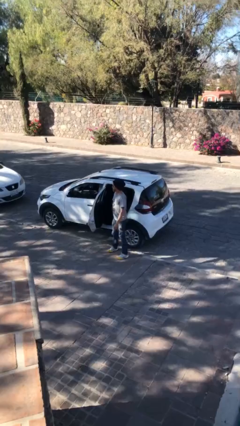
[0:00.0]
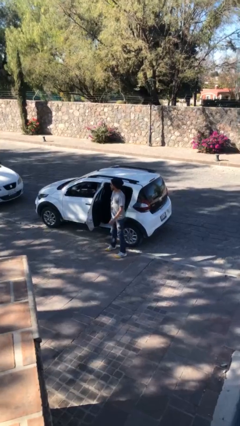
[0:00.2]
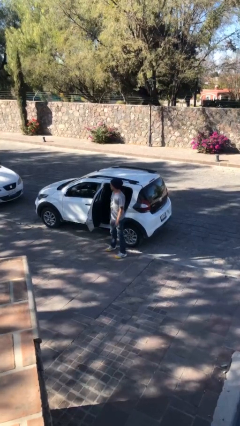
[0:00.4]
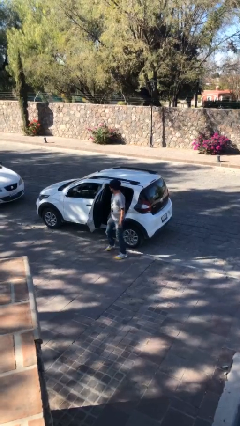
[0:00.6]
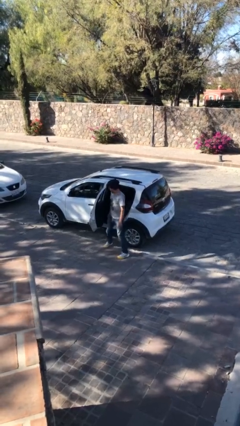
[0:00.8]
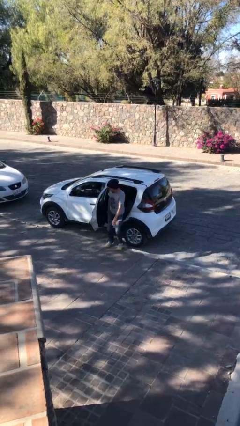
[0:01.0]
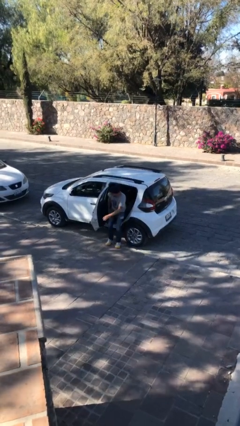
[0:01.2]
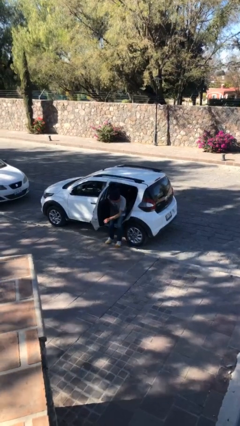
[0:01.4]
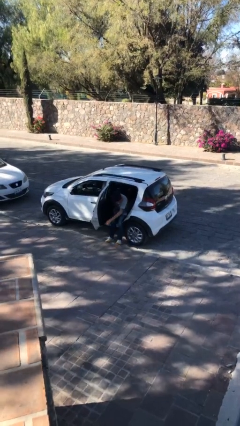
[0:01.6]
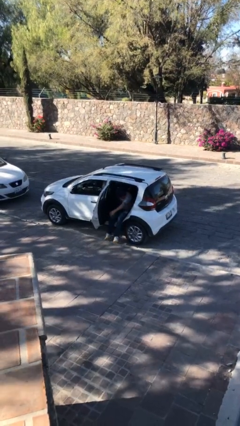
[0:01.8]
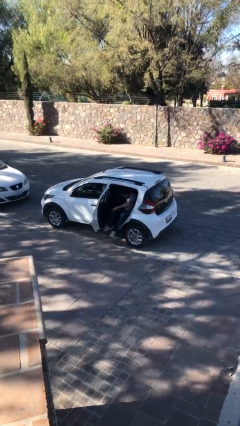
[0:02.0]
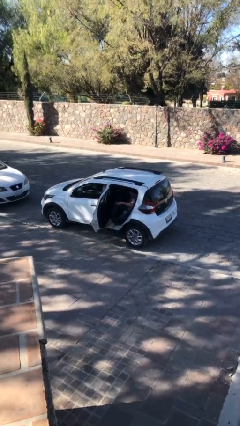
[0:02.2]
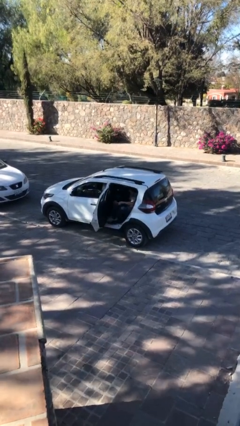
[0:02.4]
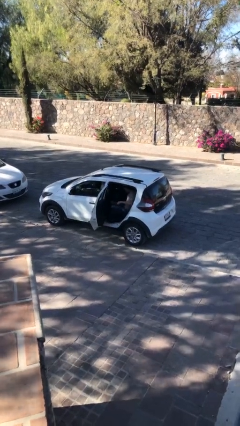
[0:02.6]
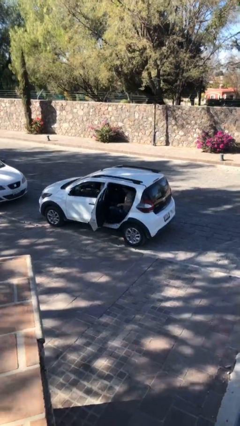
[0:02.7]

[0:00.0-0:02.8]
person enters car

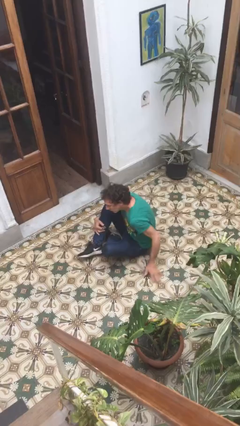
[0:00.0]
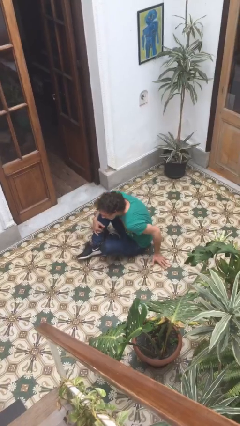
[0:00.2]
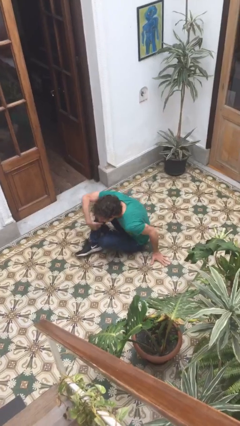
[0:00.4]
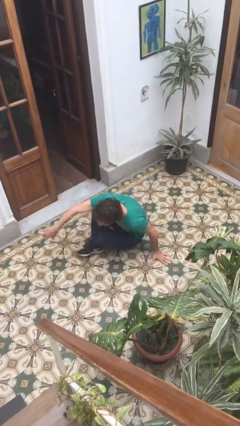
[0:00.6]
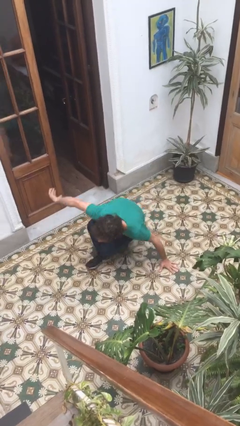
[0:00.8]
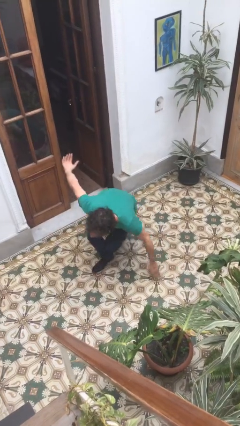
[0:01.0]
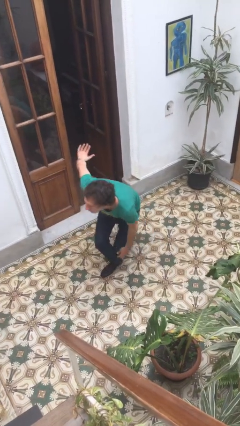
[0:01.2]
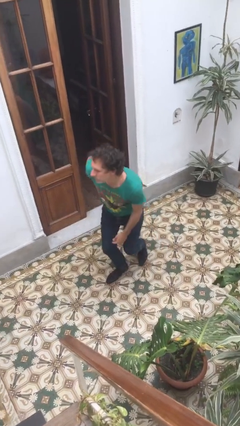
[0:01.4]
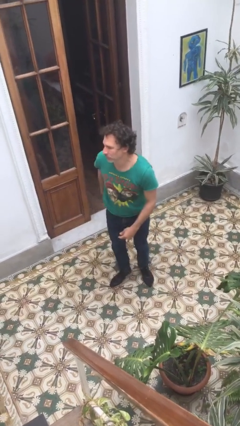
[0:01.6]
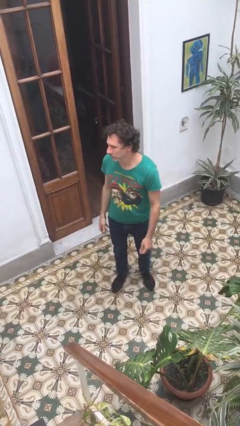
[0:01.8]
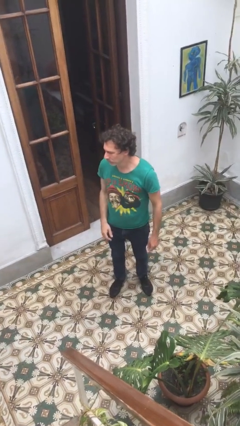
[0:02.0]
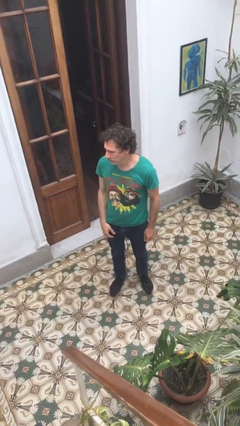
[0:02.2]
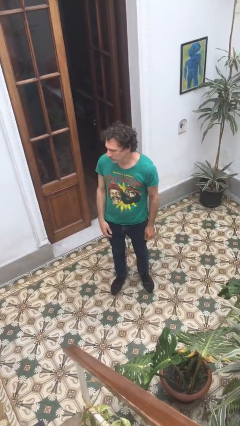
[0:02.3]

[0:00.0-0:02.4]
person stands up

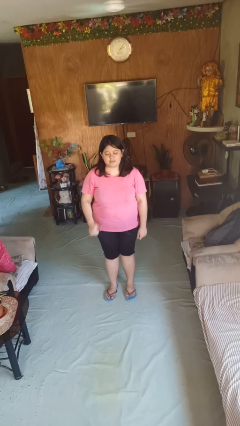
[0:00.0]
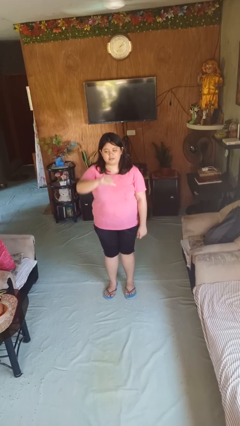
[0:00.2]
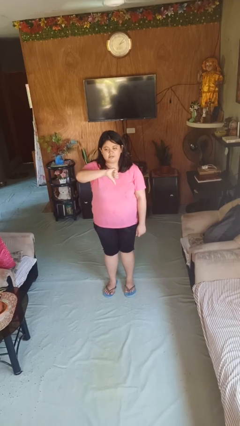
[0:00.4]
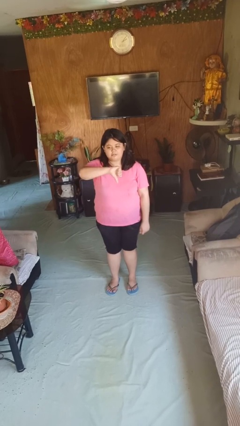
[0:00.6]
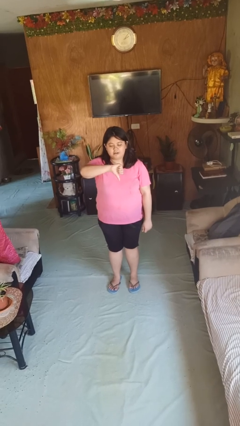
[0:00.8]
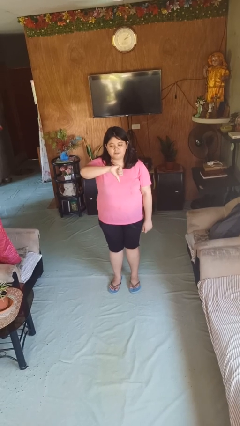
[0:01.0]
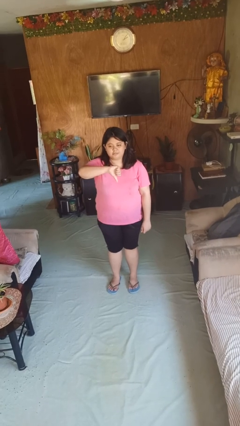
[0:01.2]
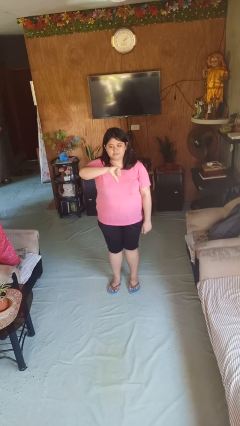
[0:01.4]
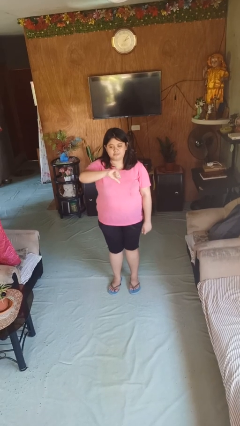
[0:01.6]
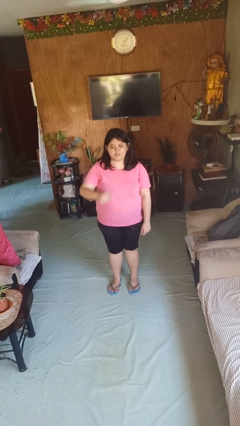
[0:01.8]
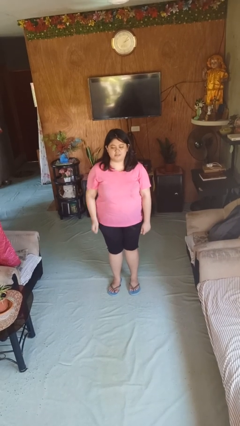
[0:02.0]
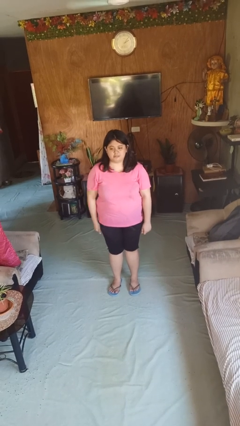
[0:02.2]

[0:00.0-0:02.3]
person gestures thumbs down

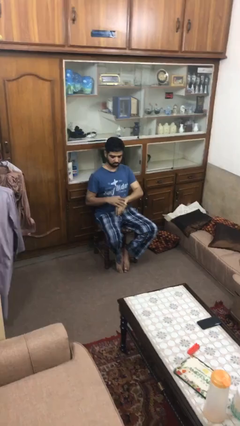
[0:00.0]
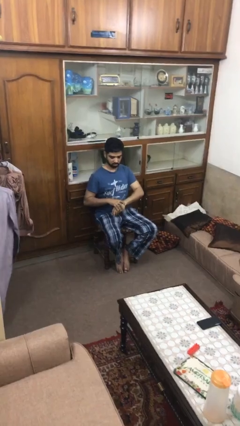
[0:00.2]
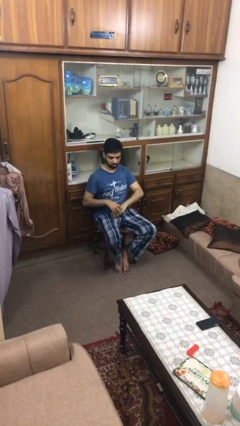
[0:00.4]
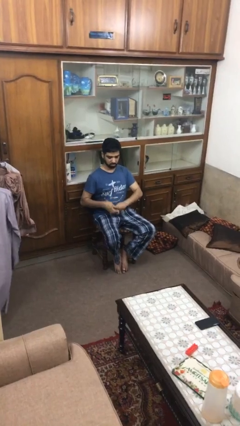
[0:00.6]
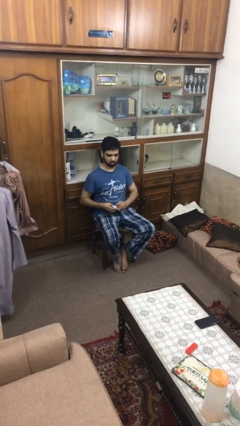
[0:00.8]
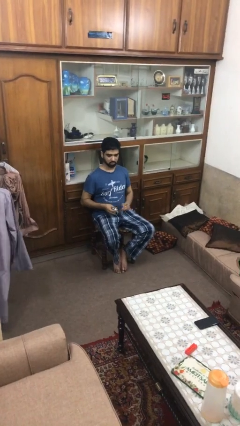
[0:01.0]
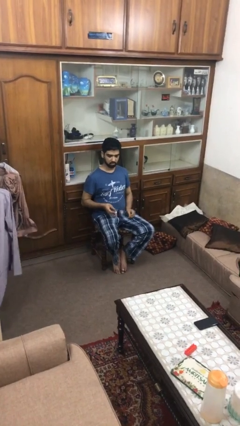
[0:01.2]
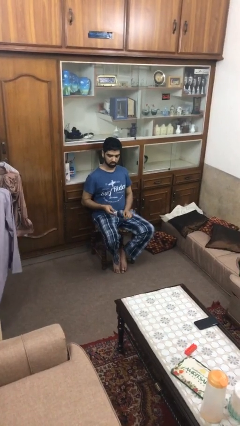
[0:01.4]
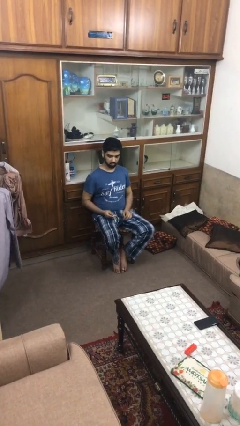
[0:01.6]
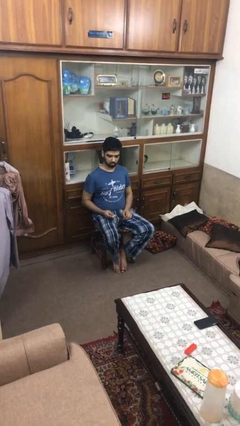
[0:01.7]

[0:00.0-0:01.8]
person takes off wristwatch

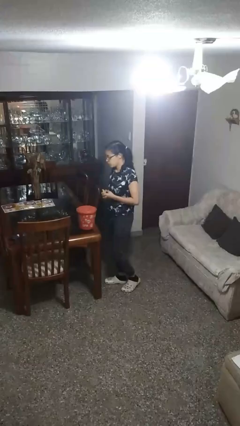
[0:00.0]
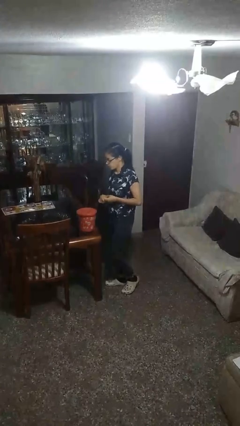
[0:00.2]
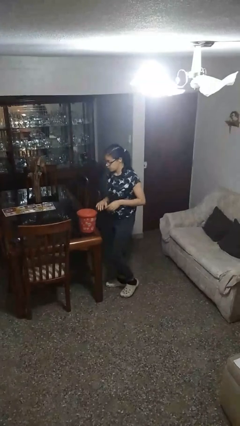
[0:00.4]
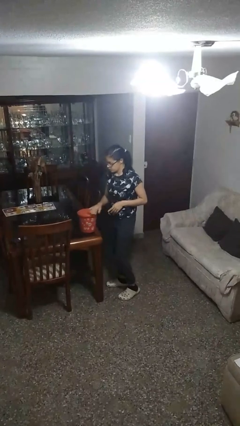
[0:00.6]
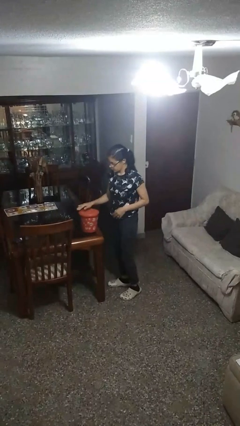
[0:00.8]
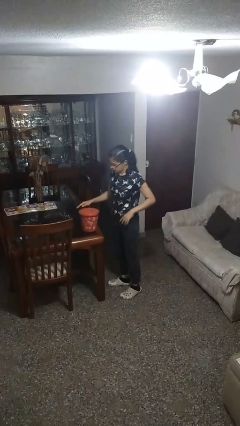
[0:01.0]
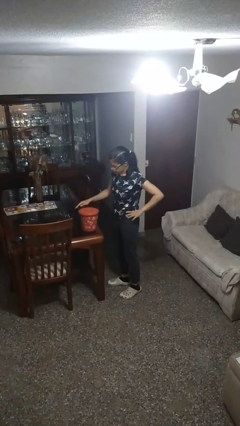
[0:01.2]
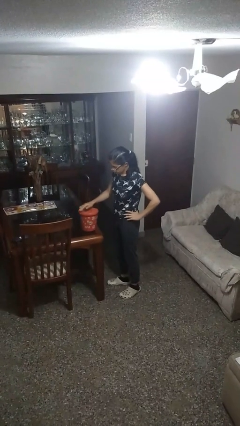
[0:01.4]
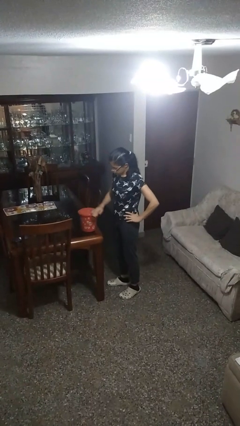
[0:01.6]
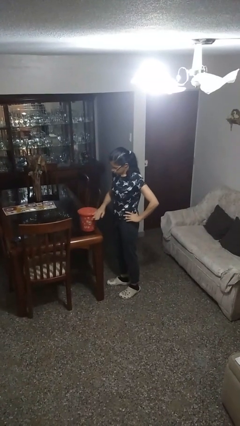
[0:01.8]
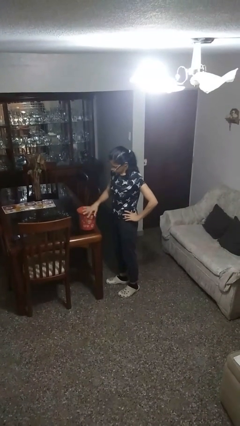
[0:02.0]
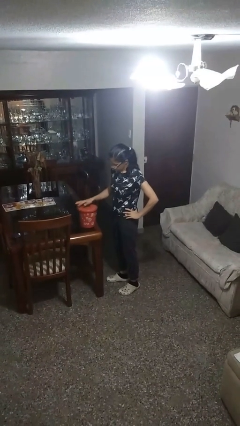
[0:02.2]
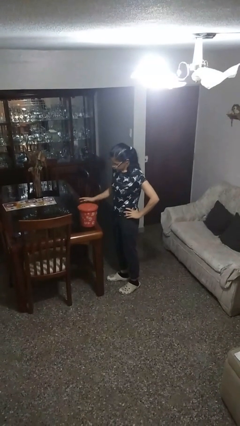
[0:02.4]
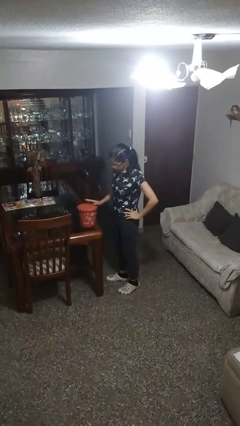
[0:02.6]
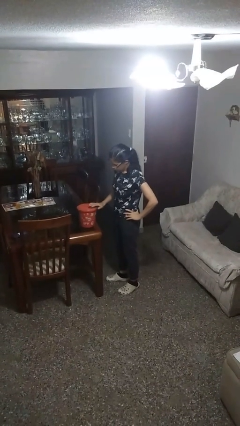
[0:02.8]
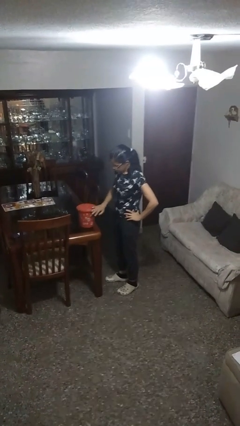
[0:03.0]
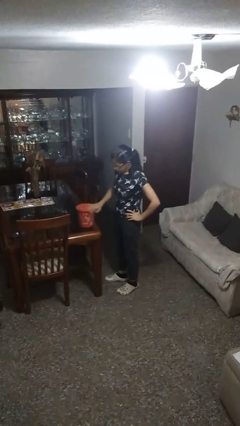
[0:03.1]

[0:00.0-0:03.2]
person waves hand over object

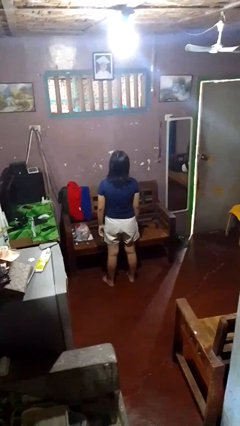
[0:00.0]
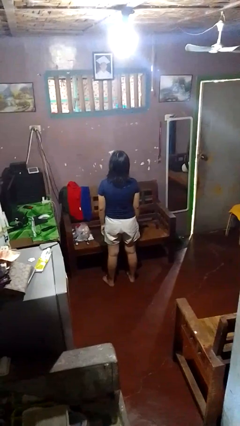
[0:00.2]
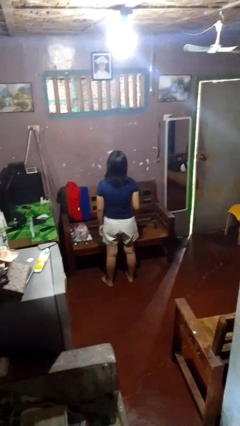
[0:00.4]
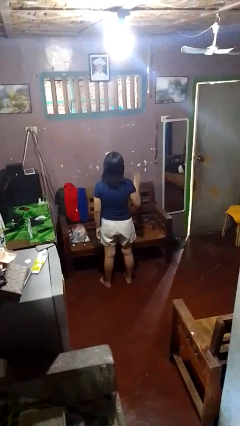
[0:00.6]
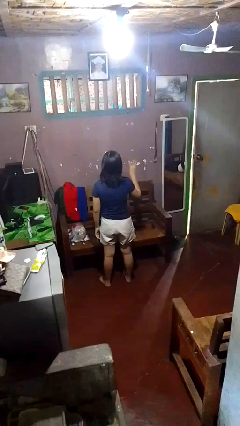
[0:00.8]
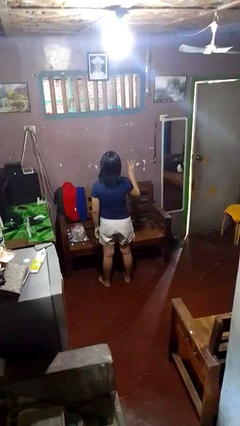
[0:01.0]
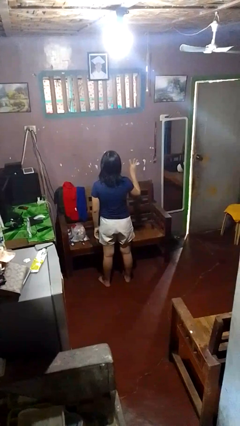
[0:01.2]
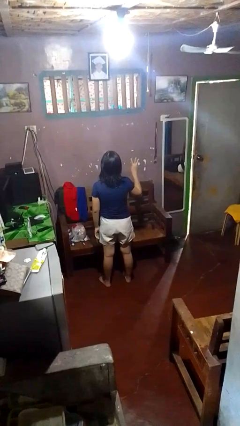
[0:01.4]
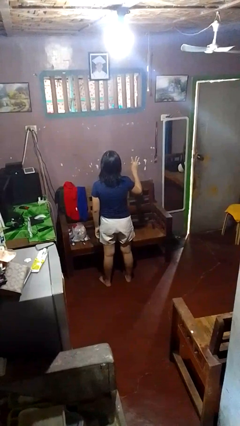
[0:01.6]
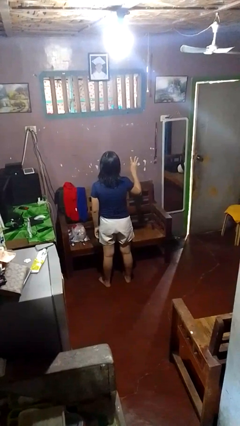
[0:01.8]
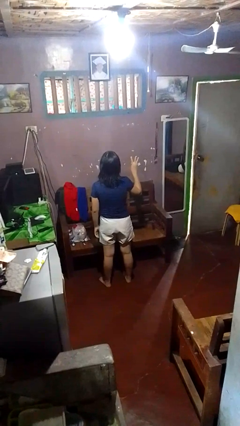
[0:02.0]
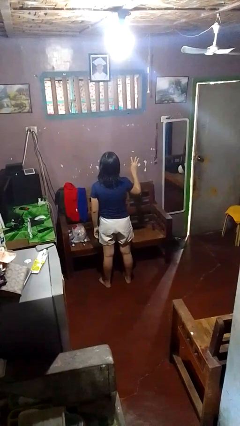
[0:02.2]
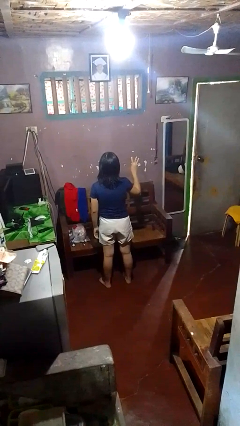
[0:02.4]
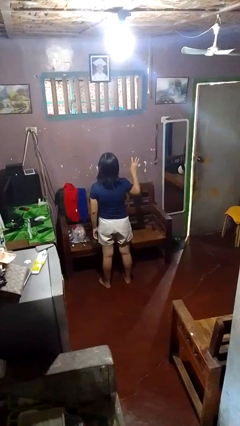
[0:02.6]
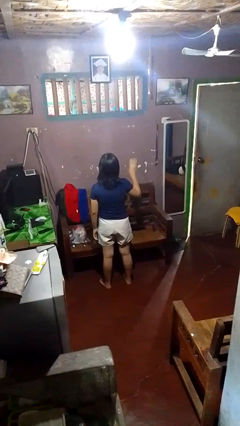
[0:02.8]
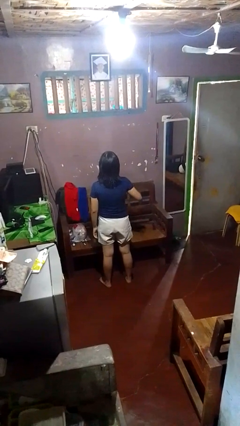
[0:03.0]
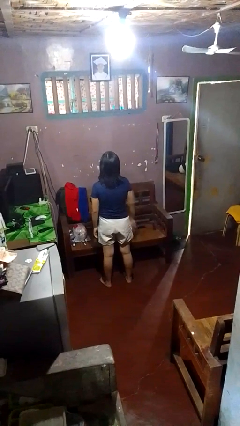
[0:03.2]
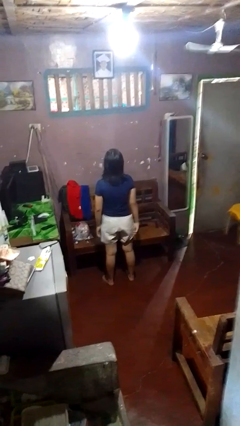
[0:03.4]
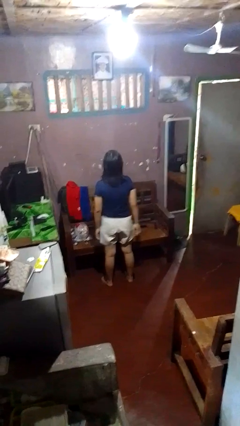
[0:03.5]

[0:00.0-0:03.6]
person gestures number three

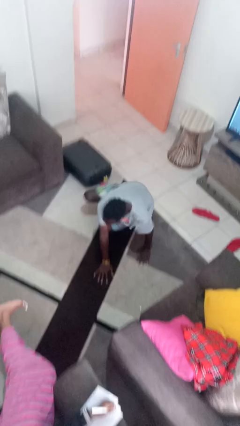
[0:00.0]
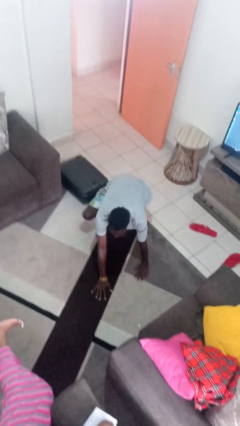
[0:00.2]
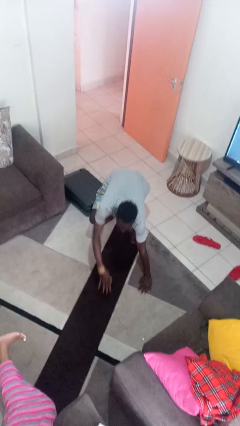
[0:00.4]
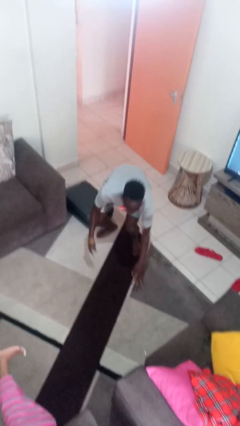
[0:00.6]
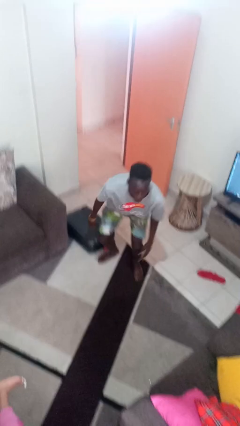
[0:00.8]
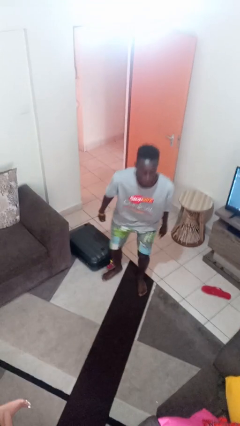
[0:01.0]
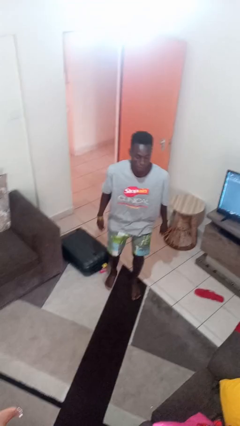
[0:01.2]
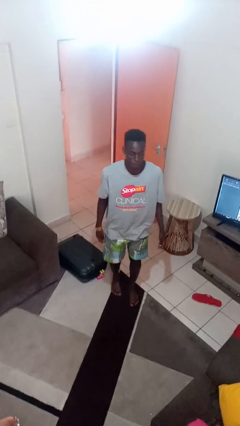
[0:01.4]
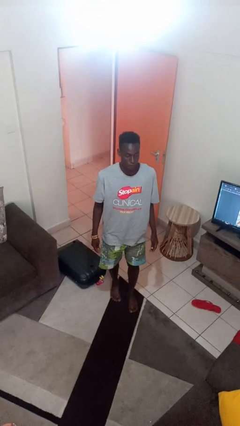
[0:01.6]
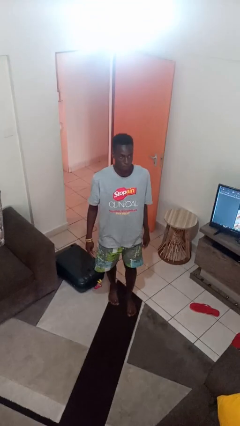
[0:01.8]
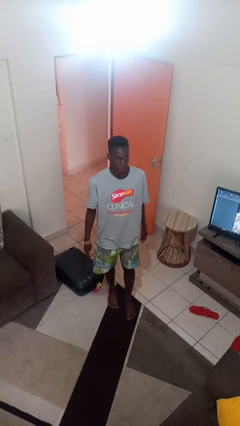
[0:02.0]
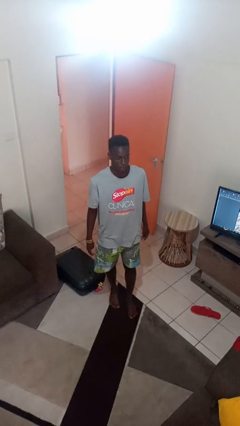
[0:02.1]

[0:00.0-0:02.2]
person stands up from floor
